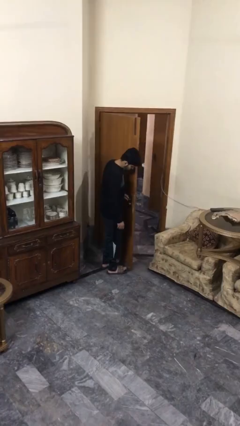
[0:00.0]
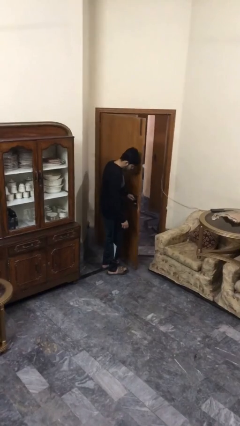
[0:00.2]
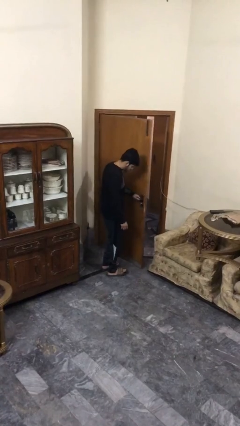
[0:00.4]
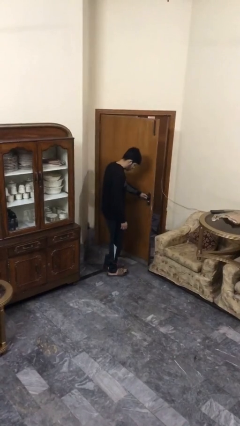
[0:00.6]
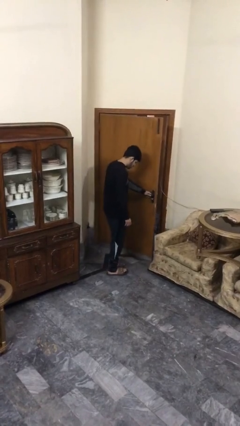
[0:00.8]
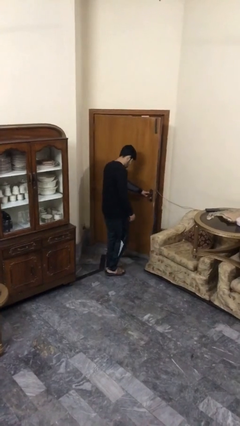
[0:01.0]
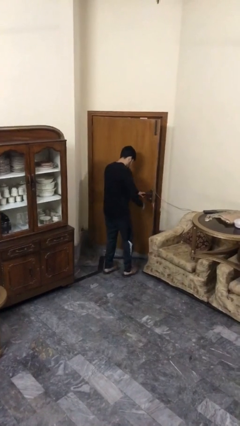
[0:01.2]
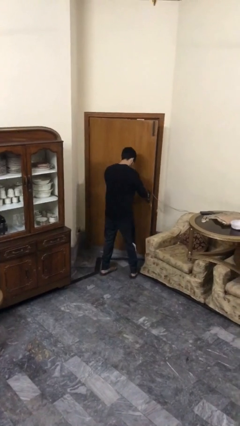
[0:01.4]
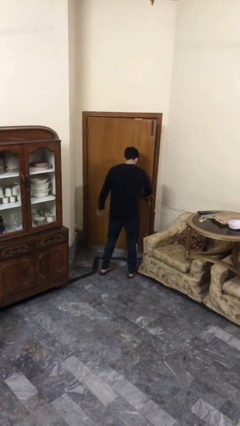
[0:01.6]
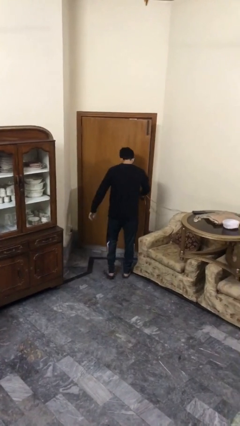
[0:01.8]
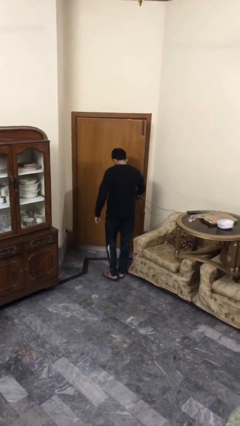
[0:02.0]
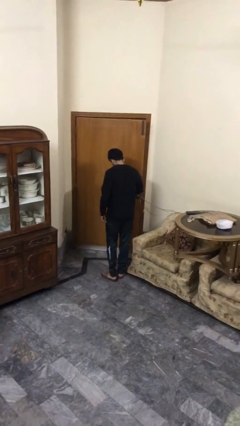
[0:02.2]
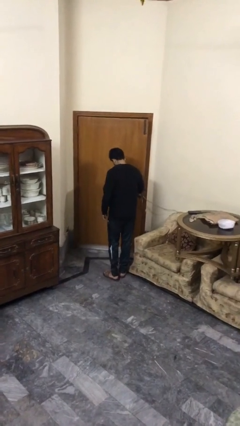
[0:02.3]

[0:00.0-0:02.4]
person closes facility door

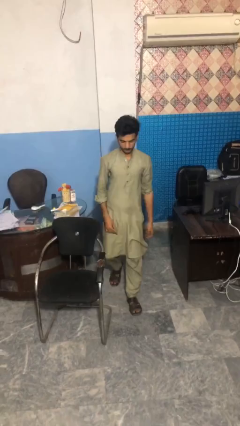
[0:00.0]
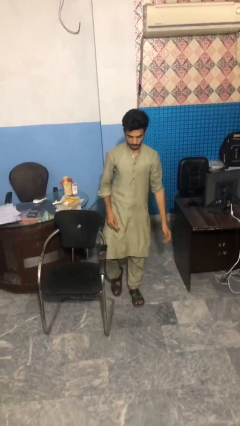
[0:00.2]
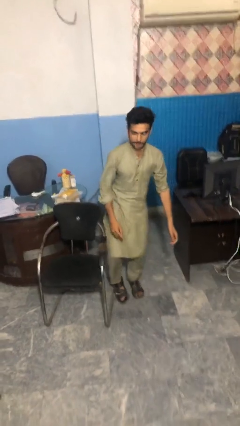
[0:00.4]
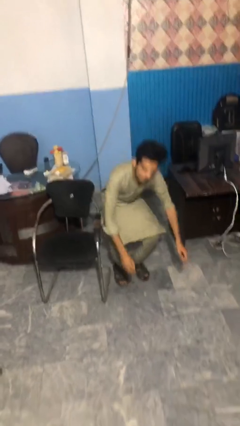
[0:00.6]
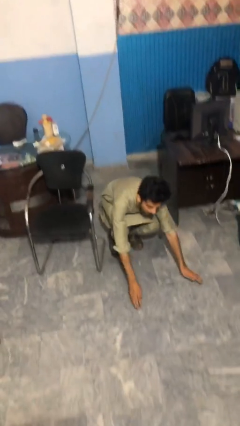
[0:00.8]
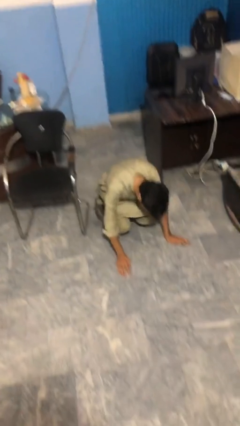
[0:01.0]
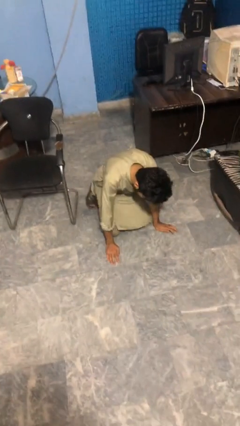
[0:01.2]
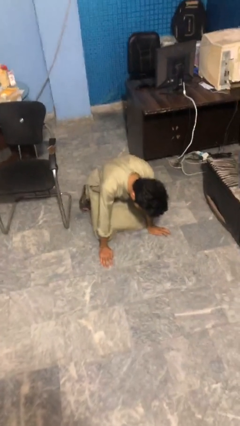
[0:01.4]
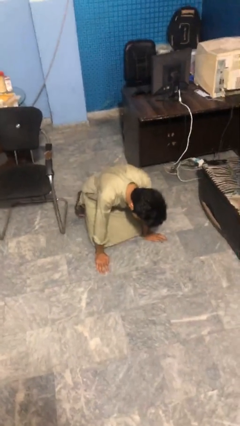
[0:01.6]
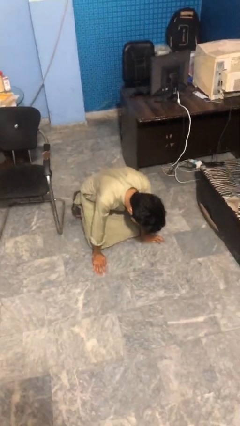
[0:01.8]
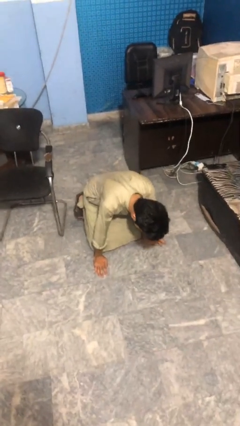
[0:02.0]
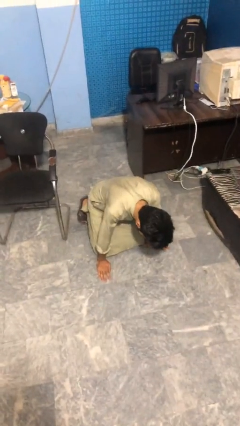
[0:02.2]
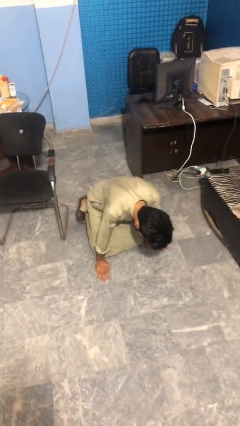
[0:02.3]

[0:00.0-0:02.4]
person trips on object on floor

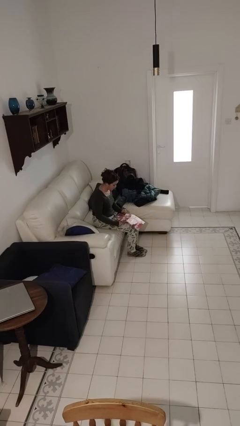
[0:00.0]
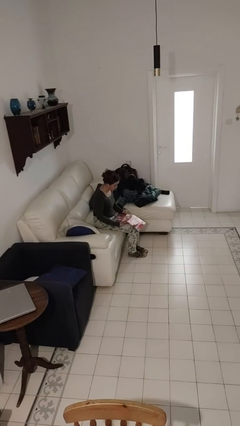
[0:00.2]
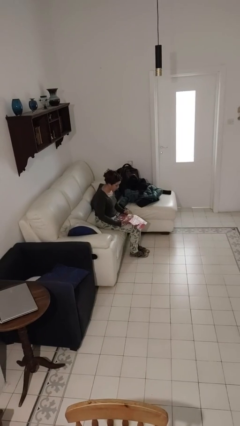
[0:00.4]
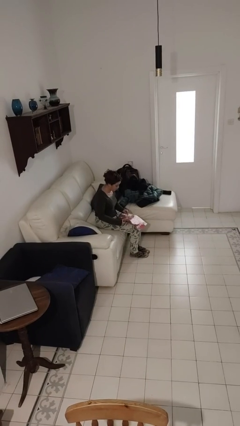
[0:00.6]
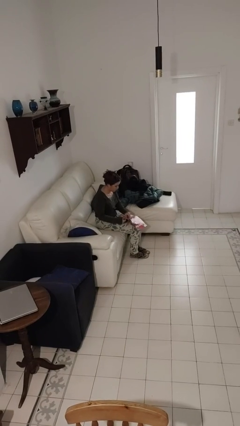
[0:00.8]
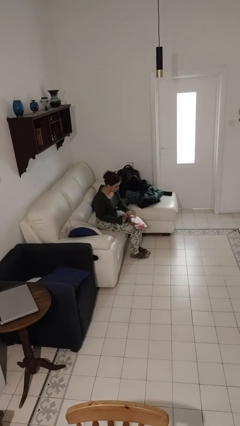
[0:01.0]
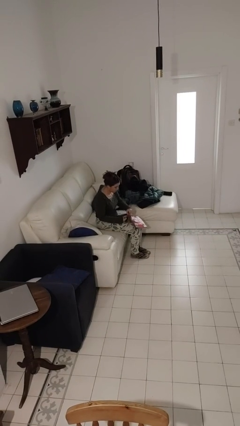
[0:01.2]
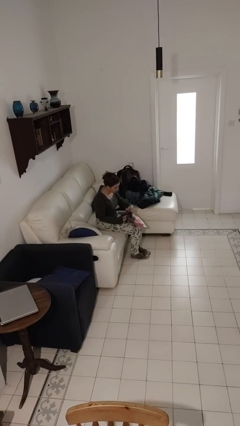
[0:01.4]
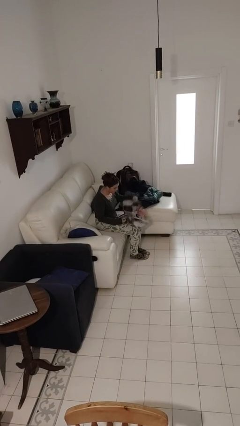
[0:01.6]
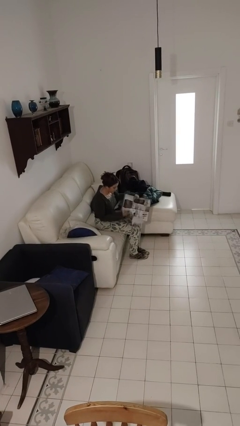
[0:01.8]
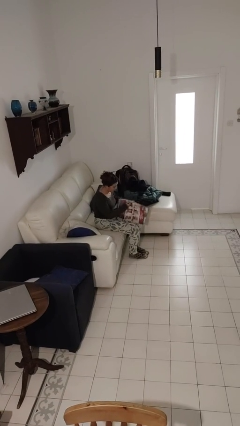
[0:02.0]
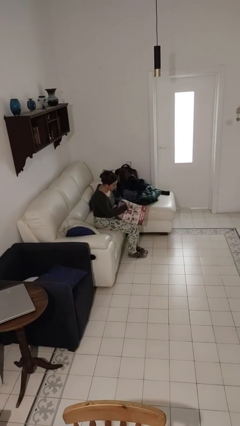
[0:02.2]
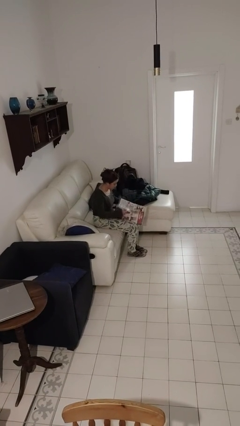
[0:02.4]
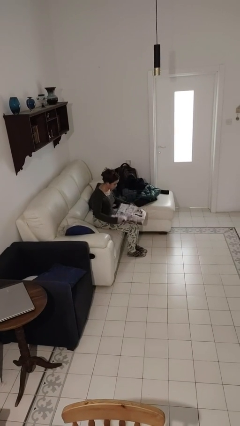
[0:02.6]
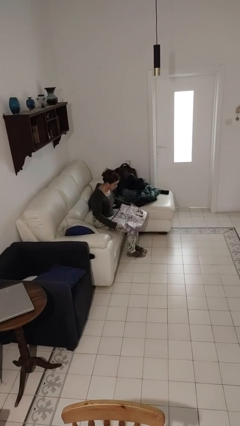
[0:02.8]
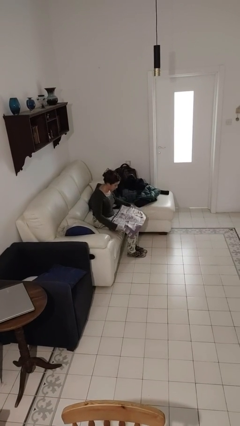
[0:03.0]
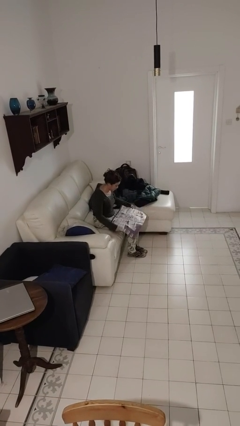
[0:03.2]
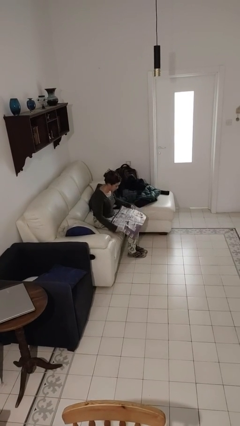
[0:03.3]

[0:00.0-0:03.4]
person reads newspaper

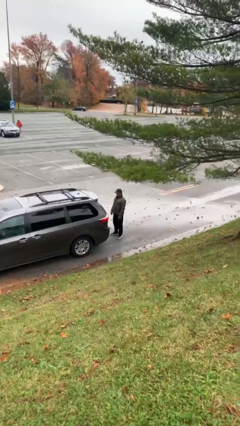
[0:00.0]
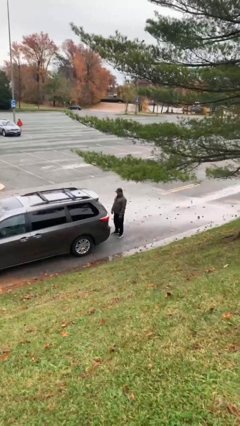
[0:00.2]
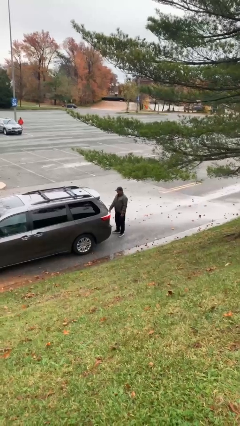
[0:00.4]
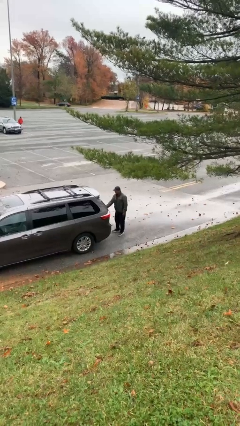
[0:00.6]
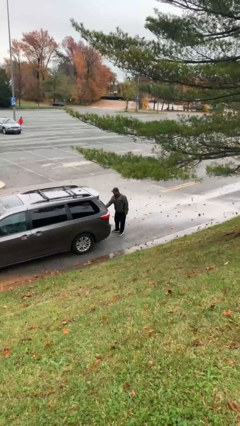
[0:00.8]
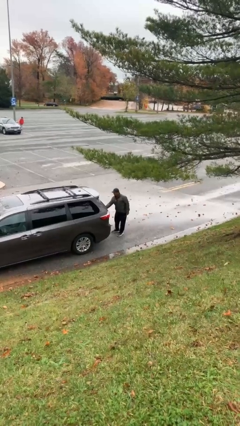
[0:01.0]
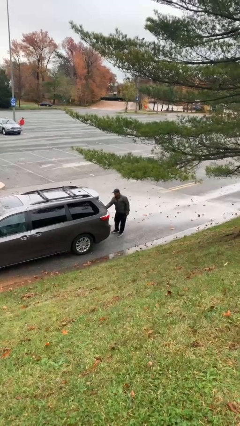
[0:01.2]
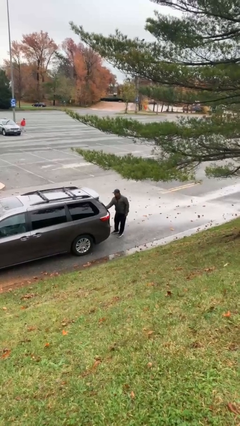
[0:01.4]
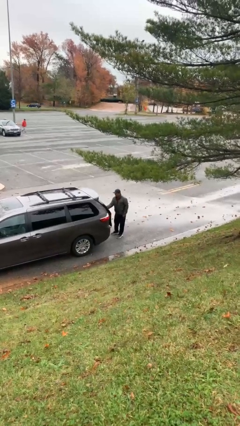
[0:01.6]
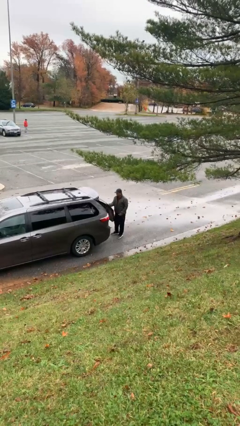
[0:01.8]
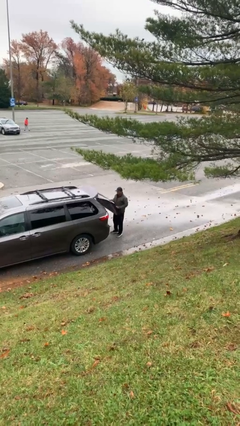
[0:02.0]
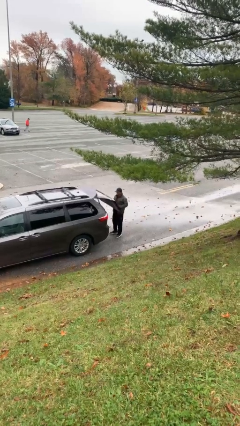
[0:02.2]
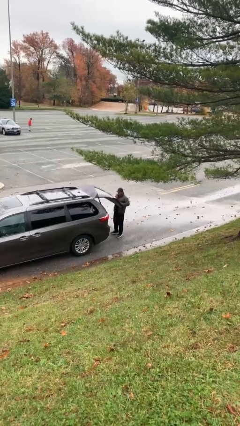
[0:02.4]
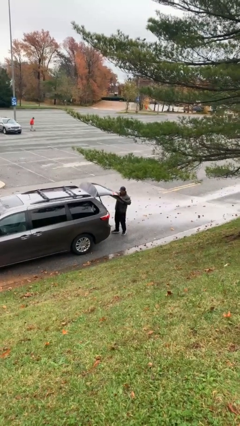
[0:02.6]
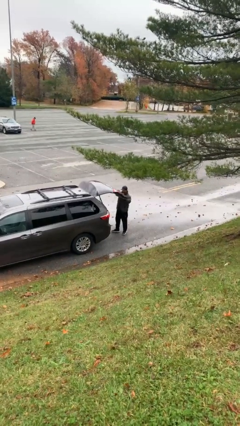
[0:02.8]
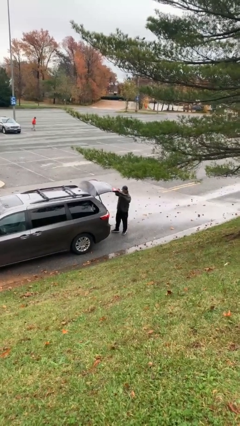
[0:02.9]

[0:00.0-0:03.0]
person opens car trunk

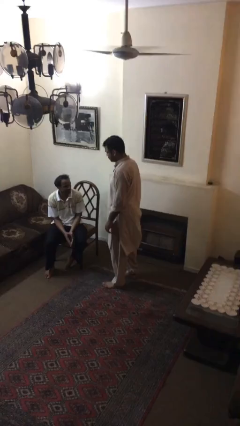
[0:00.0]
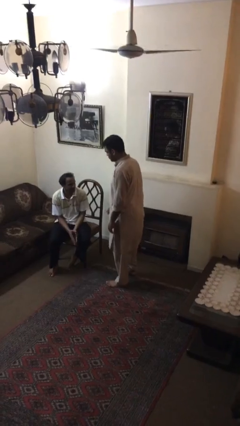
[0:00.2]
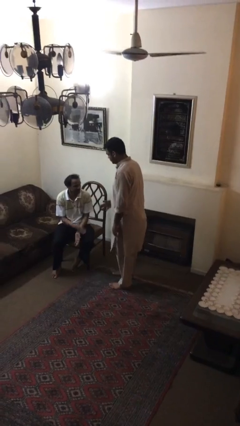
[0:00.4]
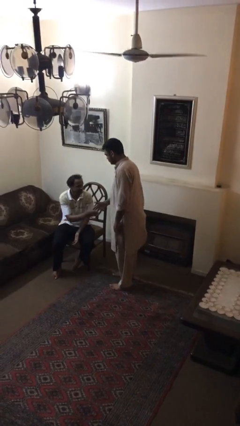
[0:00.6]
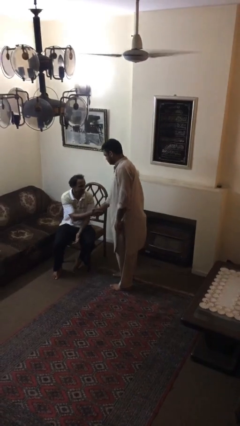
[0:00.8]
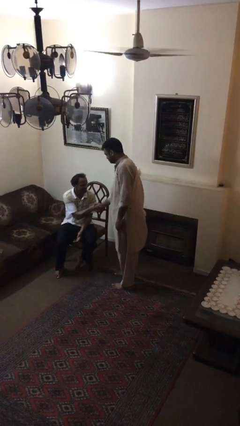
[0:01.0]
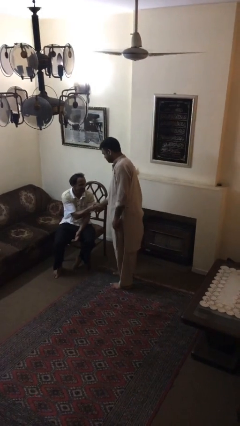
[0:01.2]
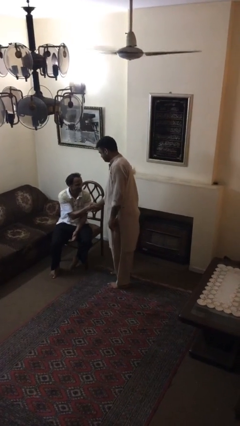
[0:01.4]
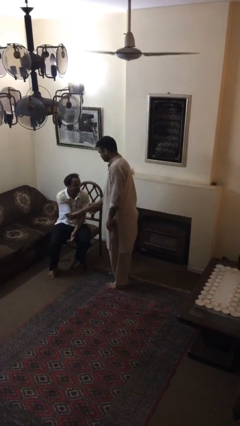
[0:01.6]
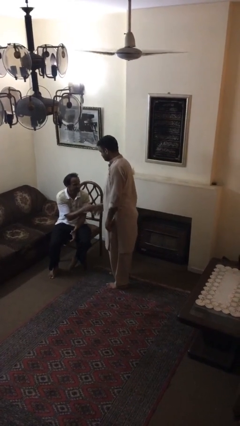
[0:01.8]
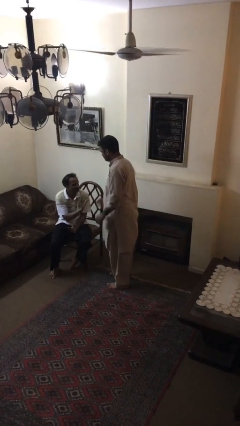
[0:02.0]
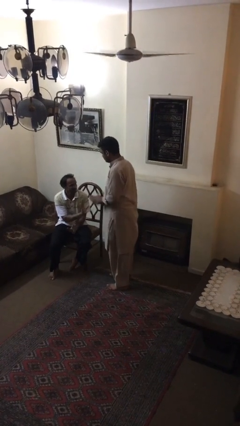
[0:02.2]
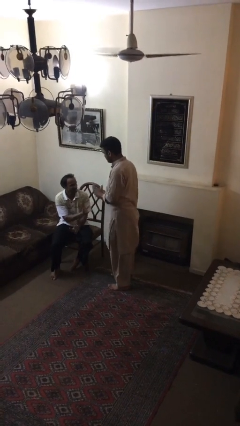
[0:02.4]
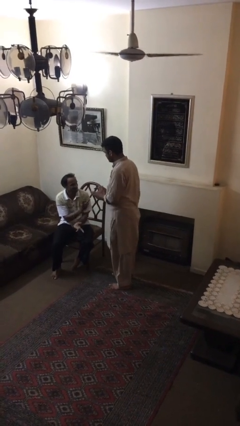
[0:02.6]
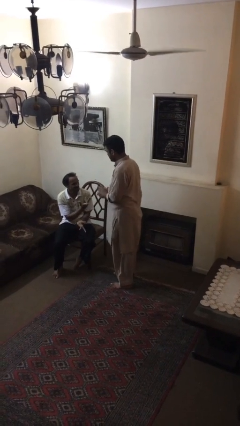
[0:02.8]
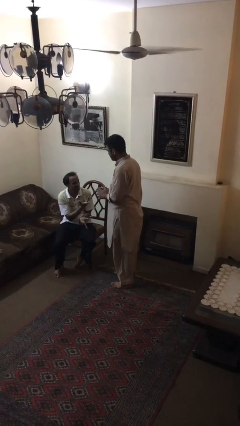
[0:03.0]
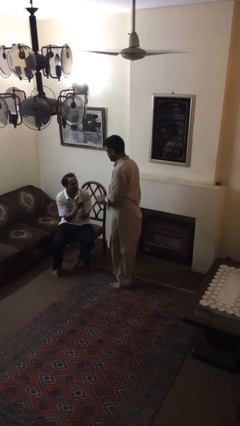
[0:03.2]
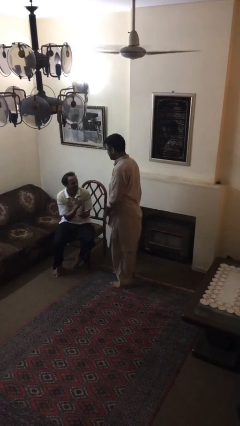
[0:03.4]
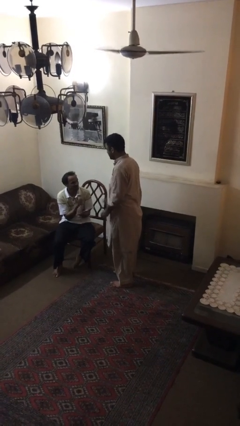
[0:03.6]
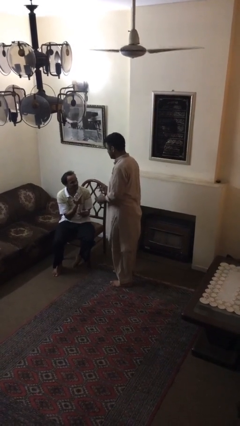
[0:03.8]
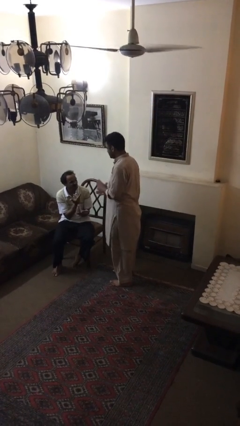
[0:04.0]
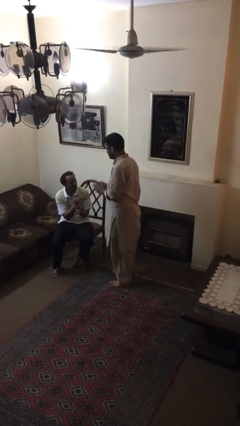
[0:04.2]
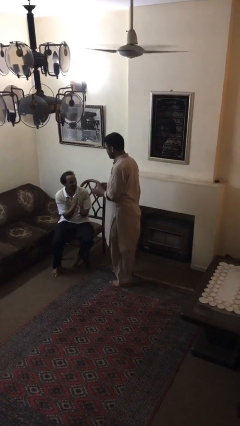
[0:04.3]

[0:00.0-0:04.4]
person shakes hand

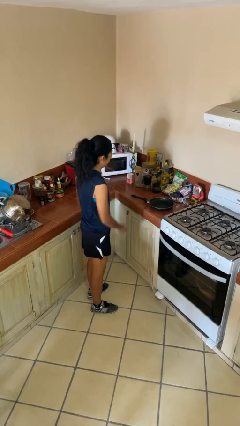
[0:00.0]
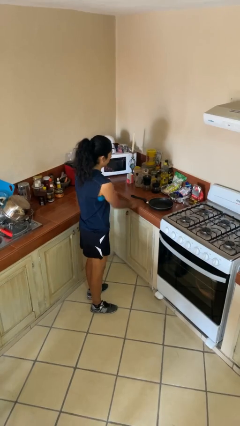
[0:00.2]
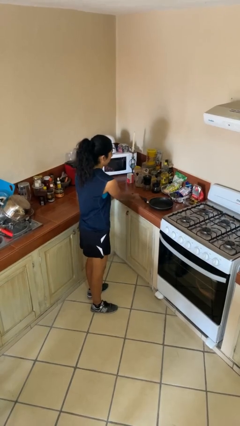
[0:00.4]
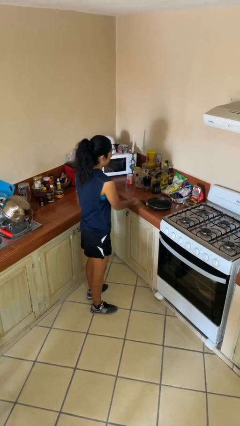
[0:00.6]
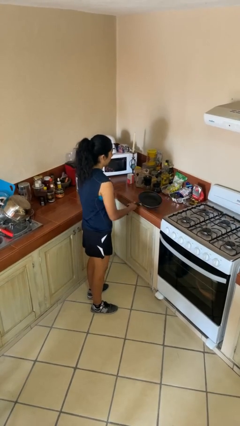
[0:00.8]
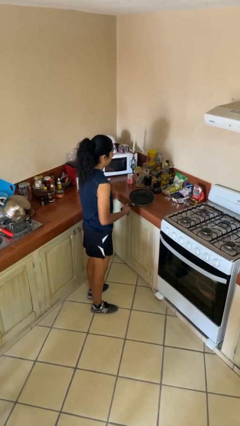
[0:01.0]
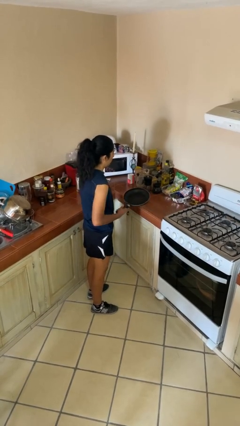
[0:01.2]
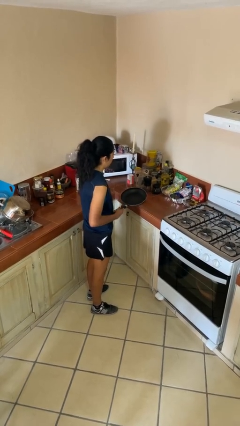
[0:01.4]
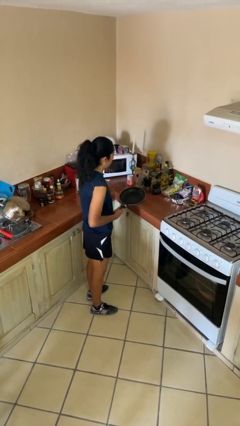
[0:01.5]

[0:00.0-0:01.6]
person picks up object from countertop
